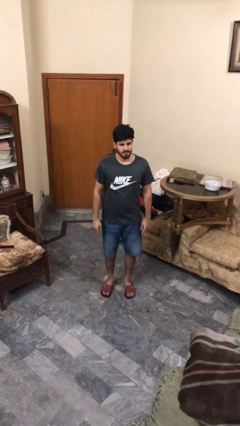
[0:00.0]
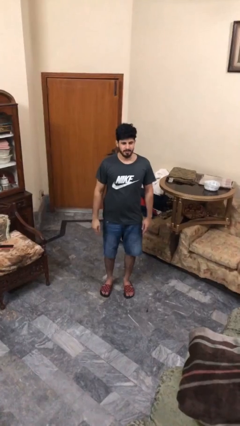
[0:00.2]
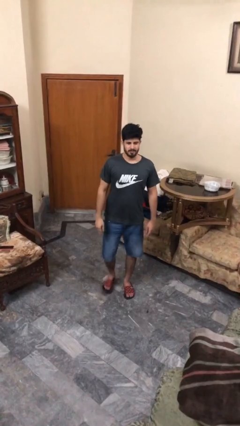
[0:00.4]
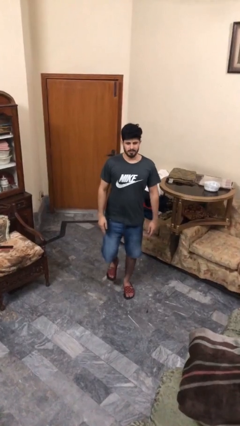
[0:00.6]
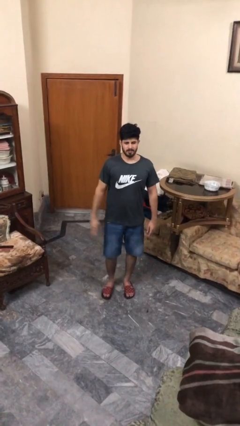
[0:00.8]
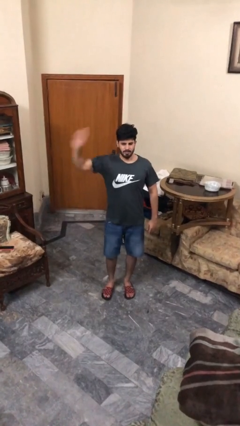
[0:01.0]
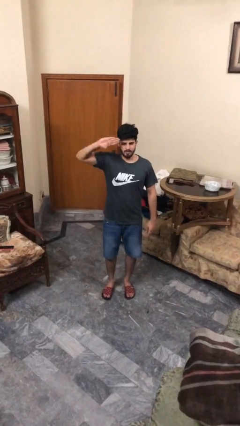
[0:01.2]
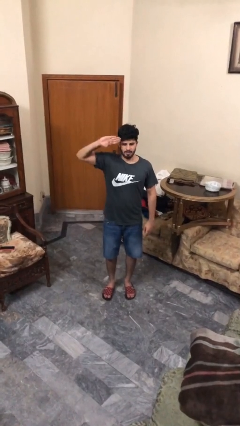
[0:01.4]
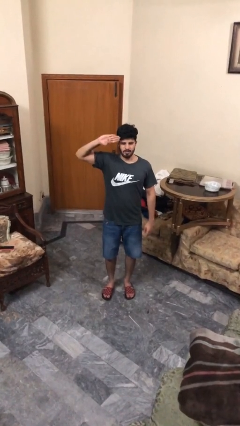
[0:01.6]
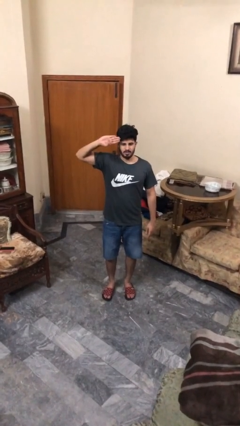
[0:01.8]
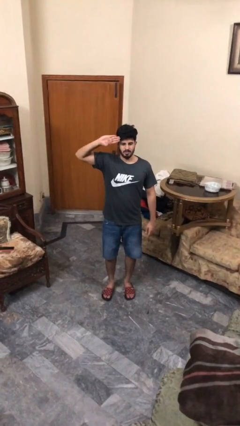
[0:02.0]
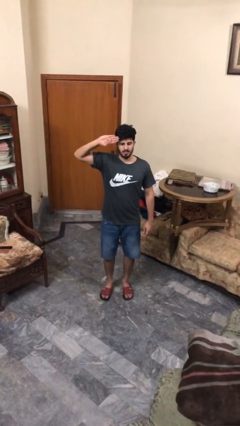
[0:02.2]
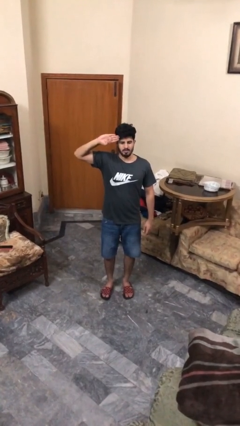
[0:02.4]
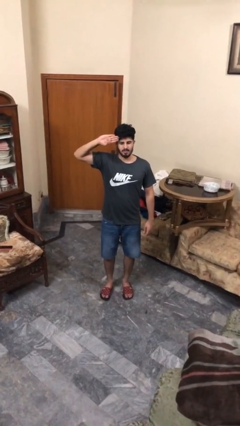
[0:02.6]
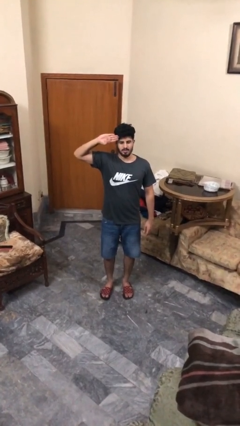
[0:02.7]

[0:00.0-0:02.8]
person salutes

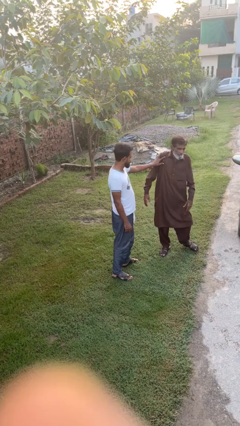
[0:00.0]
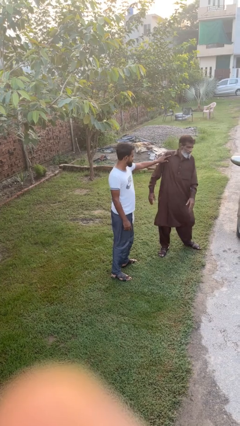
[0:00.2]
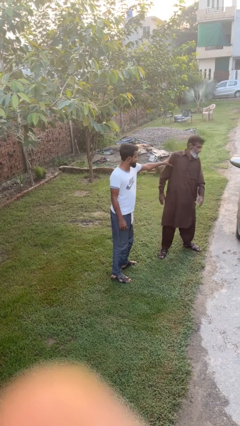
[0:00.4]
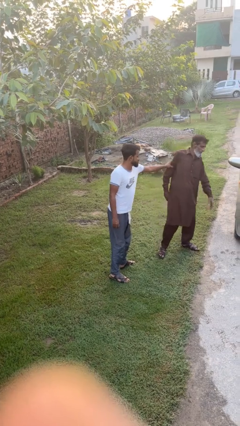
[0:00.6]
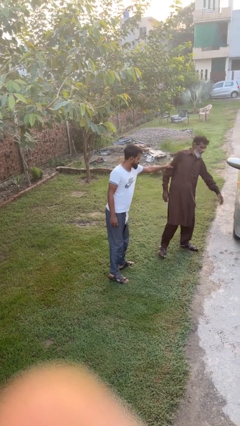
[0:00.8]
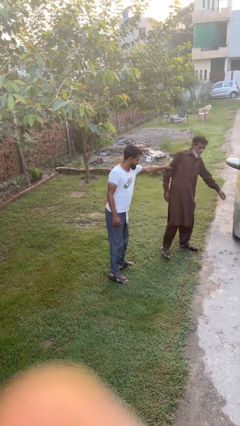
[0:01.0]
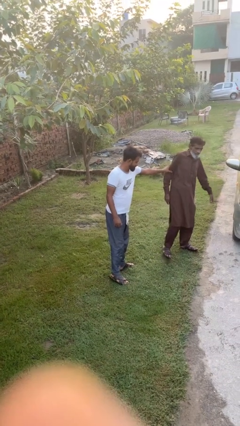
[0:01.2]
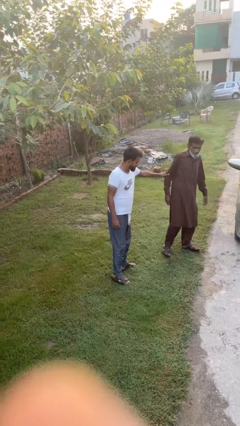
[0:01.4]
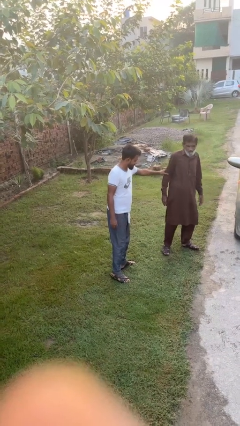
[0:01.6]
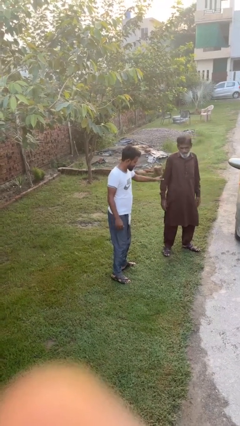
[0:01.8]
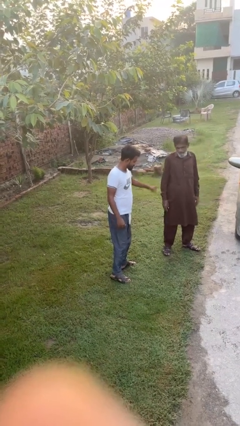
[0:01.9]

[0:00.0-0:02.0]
person shoves person

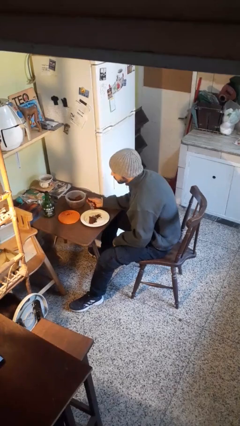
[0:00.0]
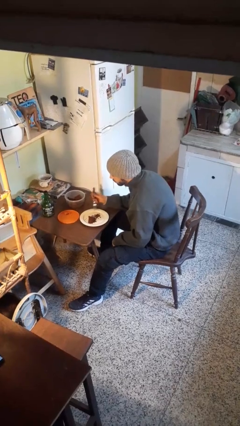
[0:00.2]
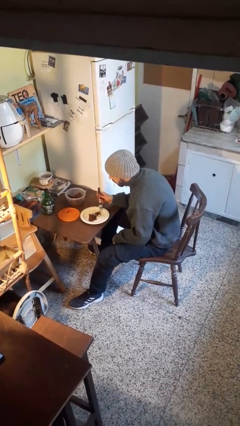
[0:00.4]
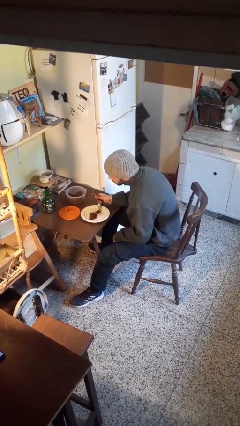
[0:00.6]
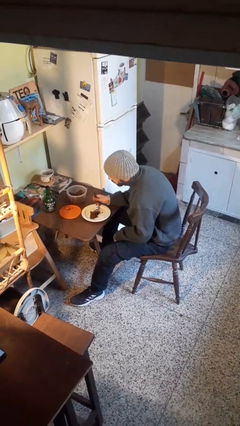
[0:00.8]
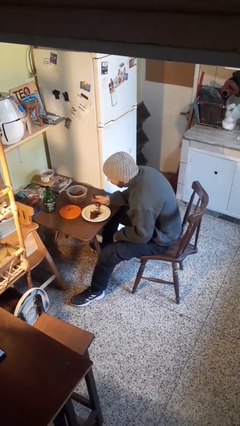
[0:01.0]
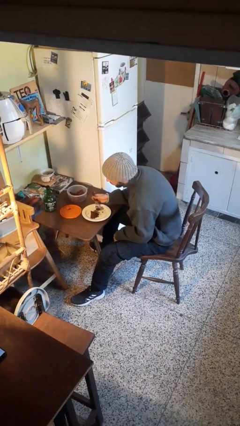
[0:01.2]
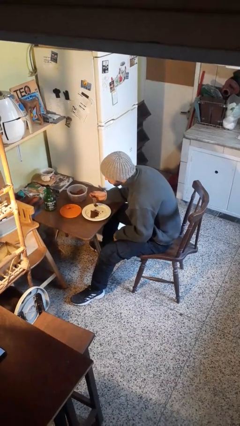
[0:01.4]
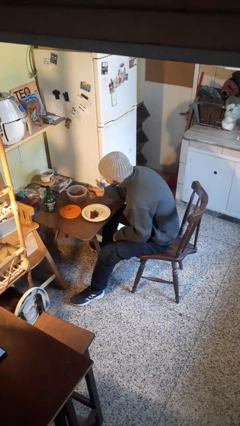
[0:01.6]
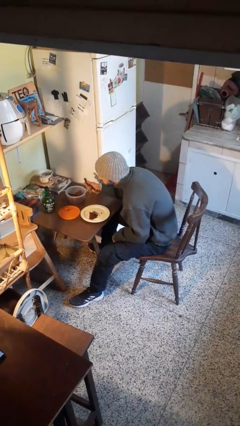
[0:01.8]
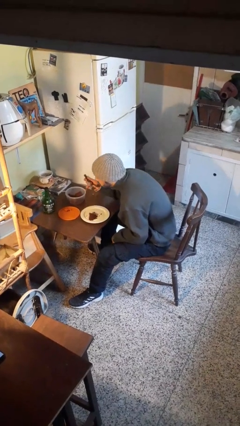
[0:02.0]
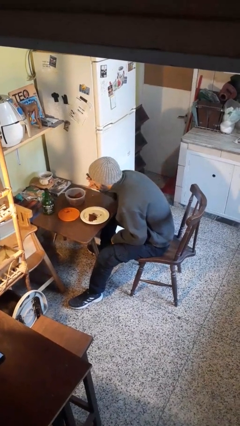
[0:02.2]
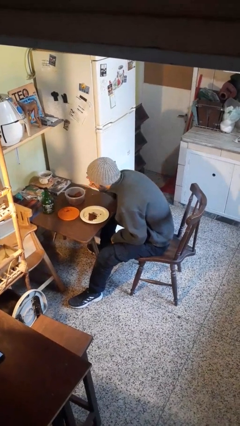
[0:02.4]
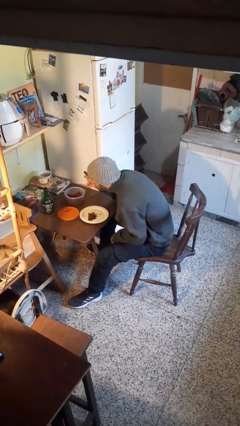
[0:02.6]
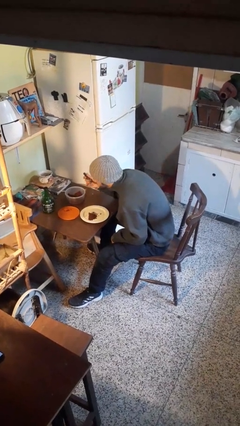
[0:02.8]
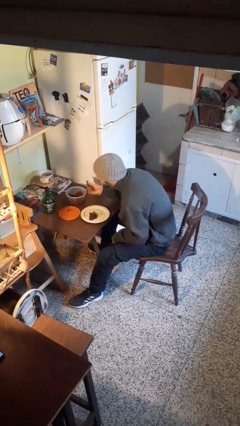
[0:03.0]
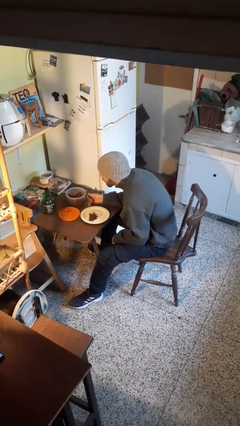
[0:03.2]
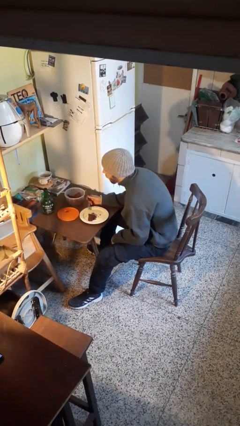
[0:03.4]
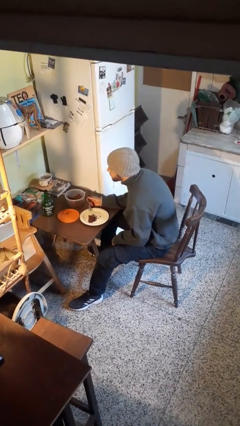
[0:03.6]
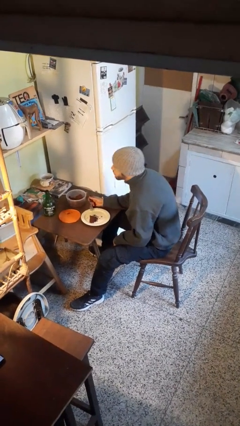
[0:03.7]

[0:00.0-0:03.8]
person eats with utensil

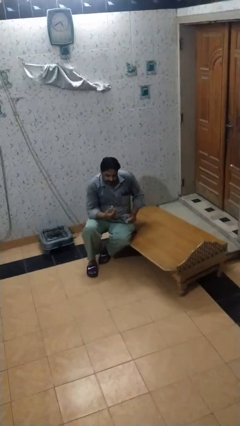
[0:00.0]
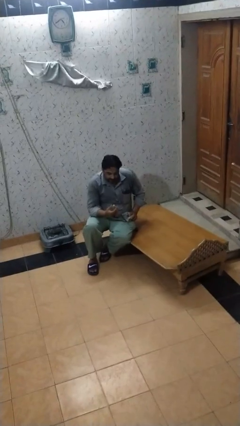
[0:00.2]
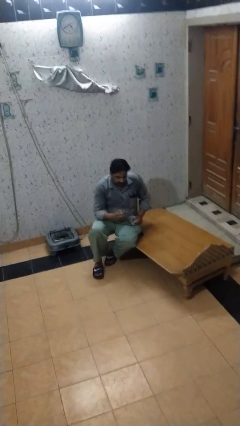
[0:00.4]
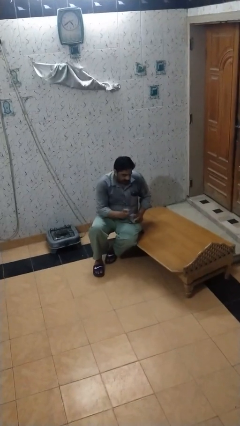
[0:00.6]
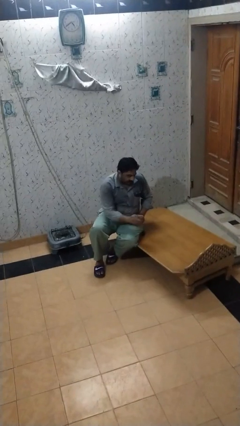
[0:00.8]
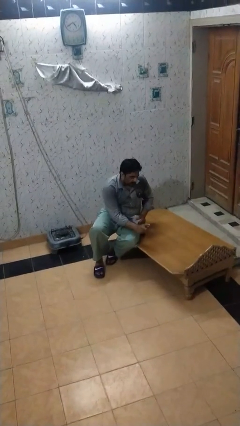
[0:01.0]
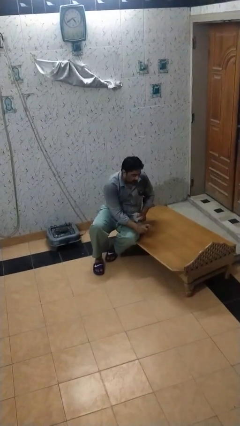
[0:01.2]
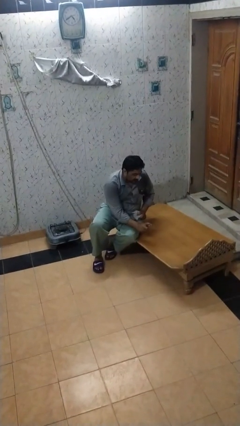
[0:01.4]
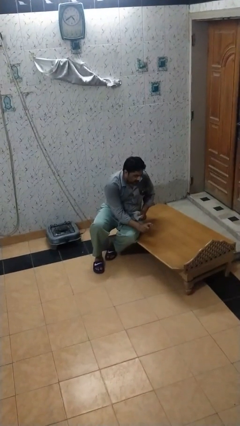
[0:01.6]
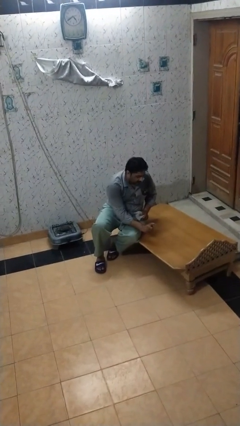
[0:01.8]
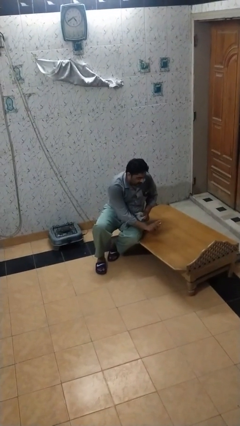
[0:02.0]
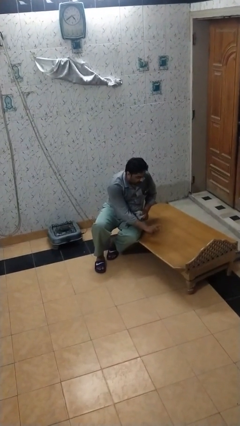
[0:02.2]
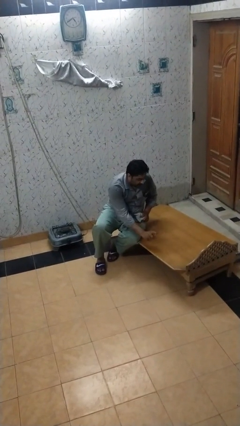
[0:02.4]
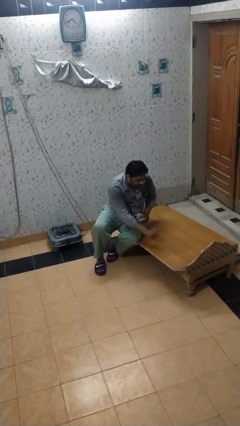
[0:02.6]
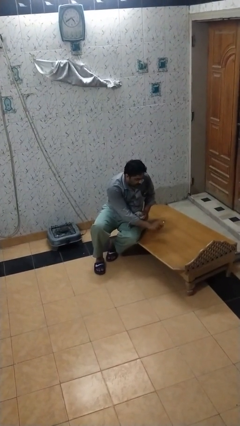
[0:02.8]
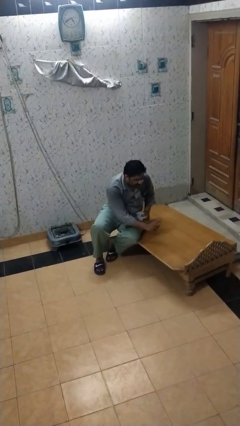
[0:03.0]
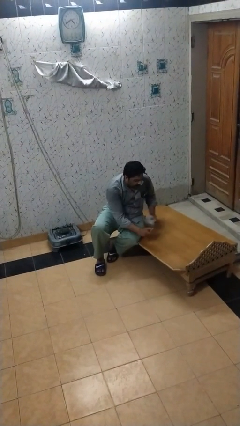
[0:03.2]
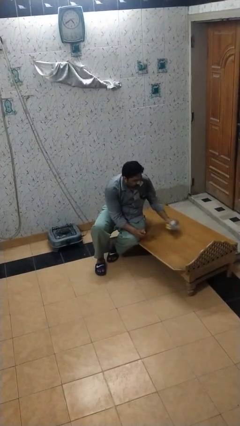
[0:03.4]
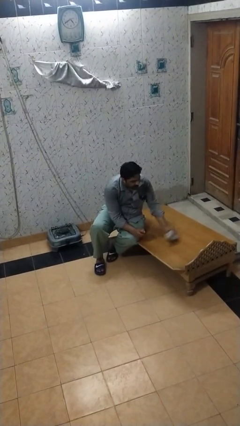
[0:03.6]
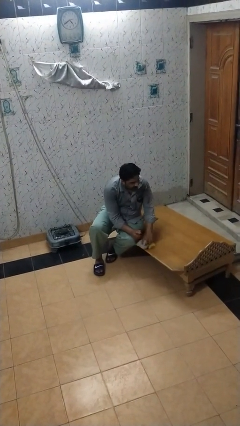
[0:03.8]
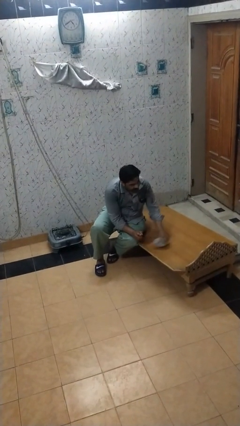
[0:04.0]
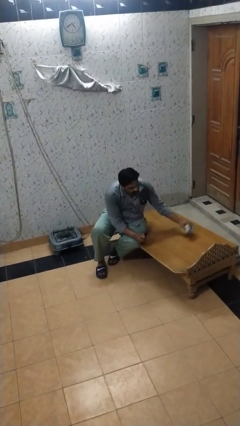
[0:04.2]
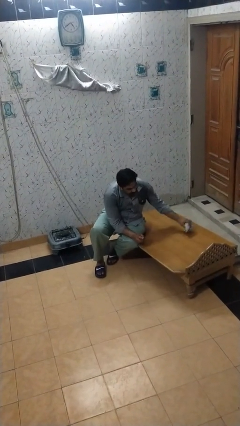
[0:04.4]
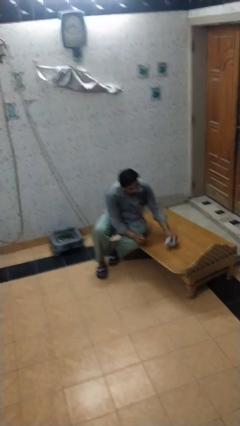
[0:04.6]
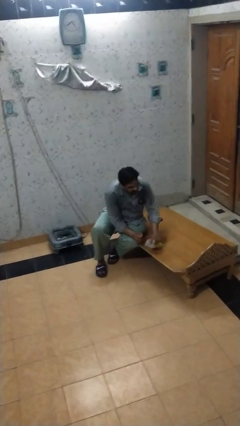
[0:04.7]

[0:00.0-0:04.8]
person sprays from bottle

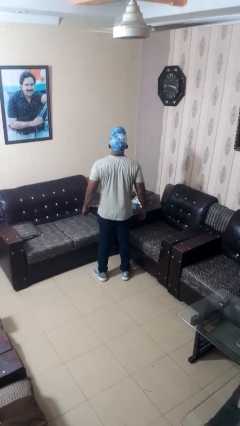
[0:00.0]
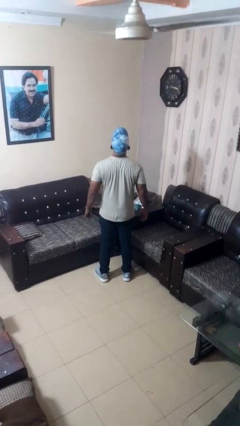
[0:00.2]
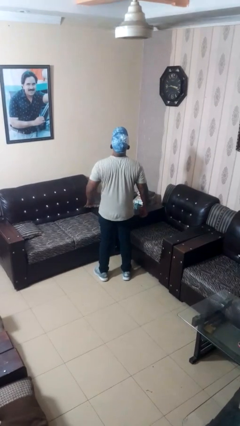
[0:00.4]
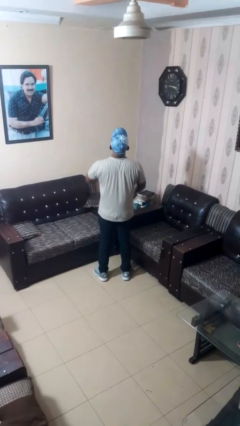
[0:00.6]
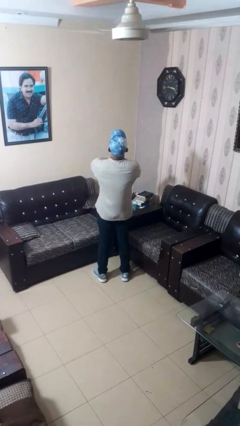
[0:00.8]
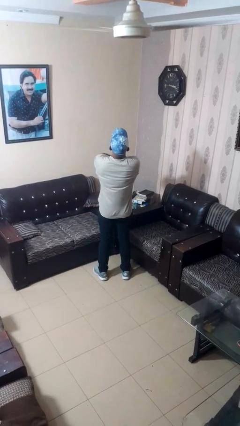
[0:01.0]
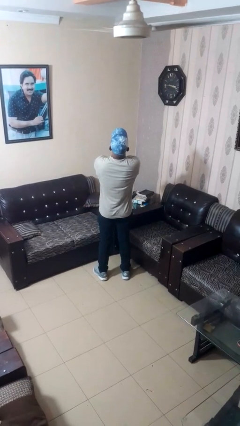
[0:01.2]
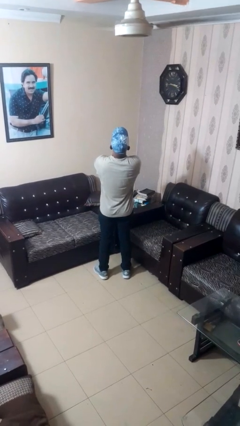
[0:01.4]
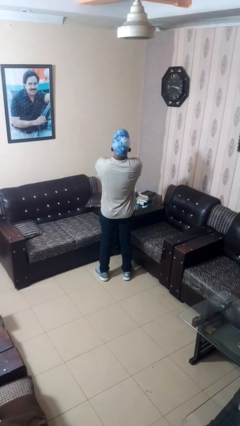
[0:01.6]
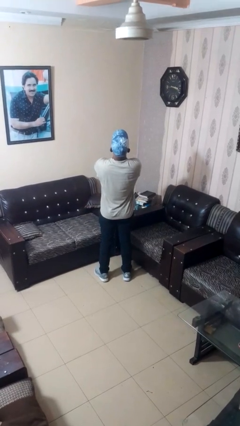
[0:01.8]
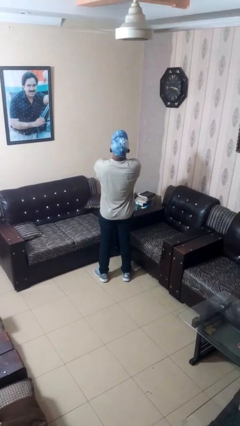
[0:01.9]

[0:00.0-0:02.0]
person crosses arms

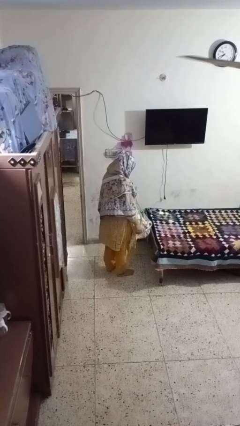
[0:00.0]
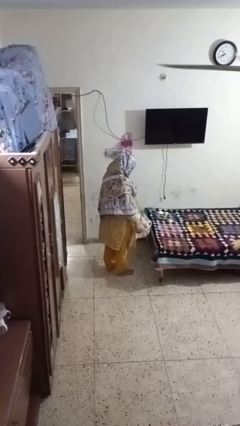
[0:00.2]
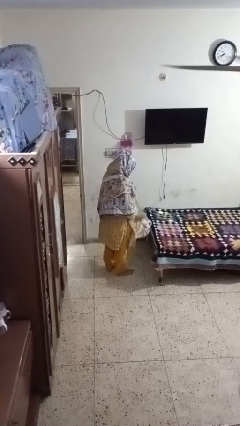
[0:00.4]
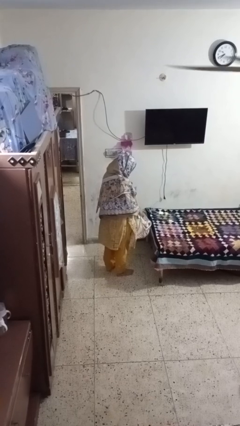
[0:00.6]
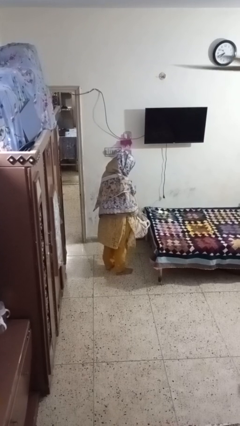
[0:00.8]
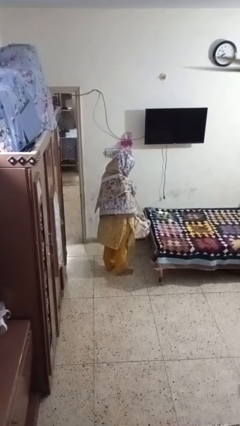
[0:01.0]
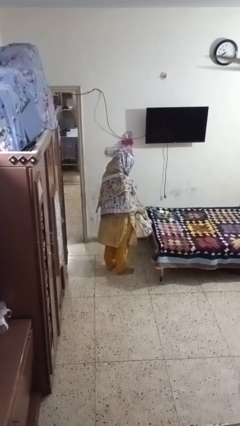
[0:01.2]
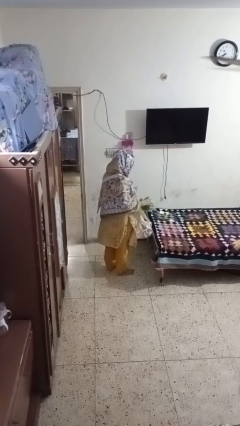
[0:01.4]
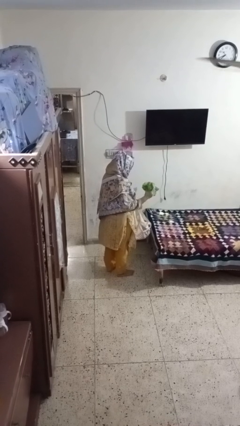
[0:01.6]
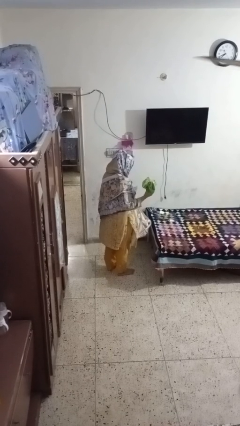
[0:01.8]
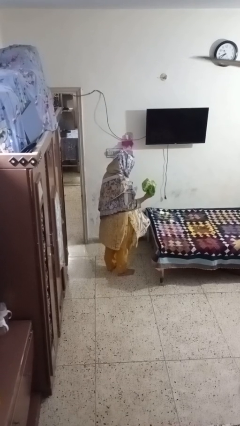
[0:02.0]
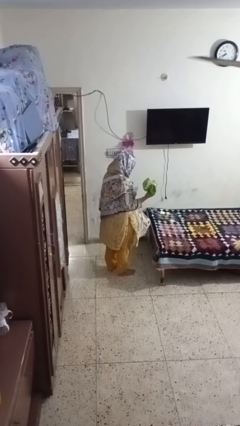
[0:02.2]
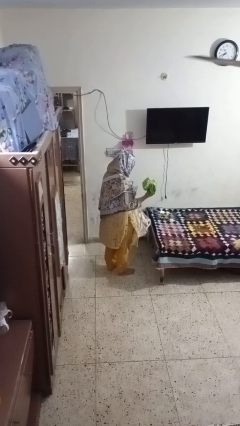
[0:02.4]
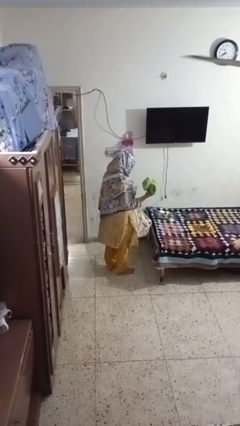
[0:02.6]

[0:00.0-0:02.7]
person takes object from bag
